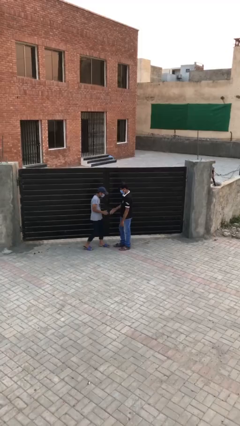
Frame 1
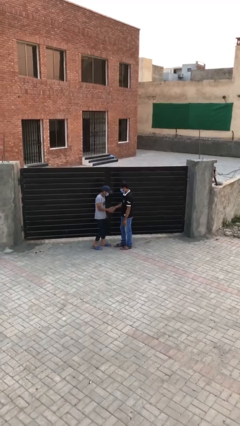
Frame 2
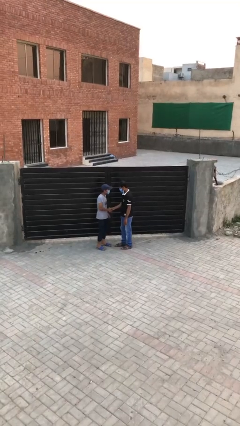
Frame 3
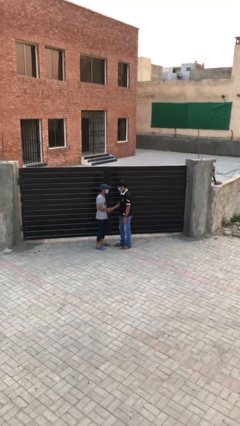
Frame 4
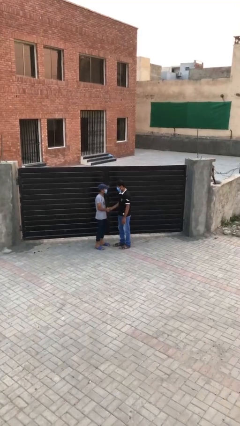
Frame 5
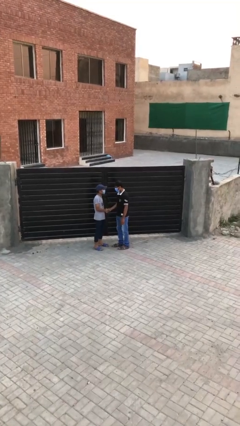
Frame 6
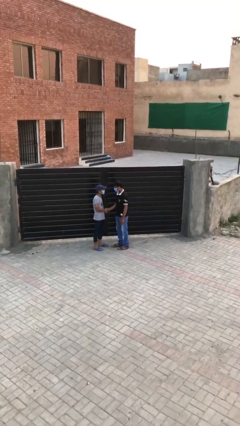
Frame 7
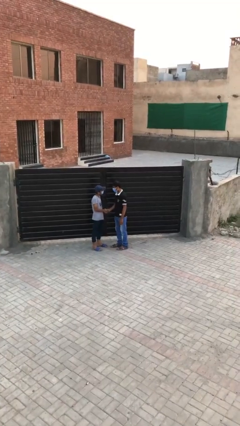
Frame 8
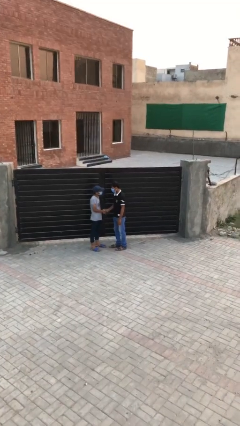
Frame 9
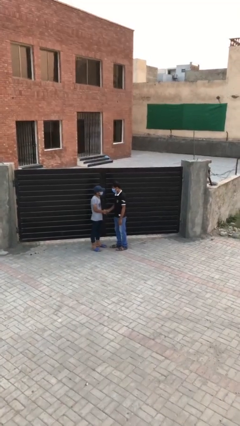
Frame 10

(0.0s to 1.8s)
person shakes hand

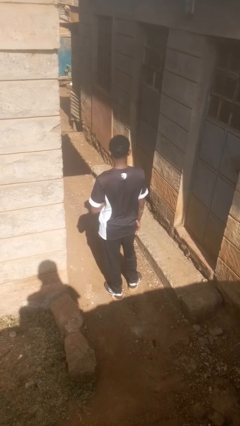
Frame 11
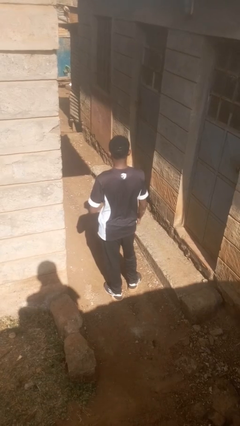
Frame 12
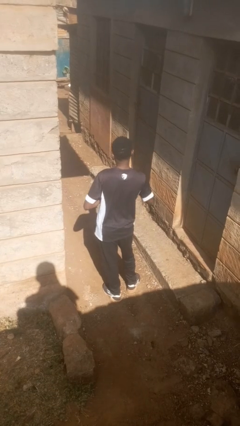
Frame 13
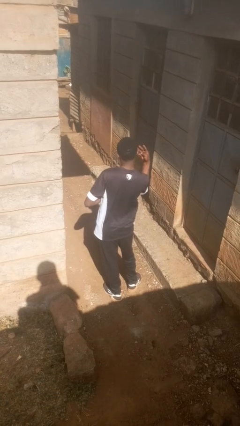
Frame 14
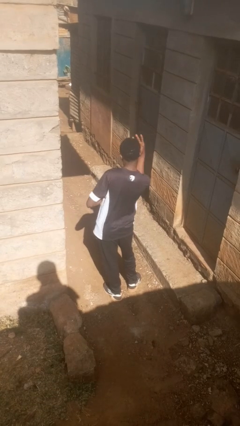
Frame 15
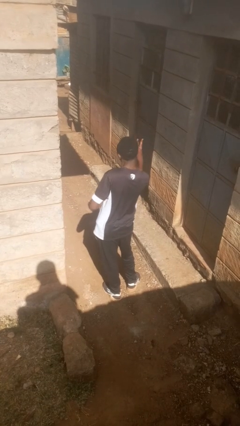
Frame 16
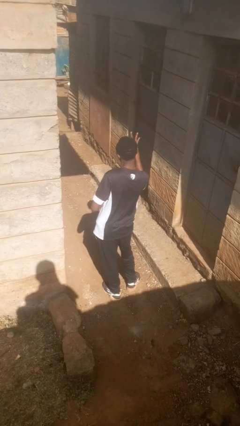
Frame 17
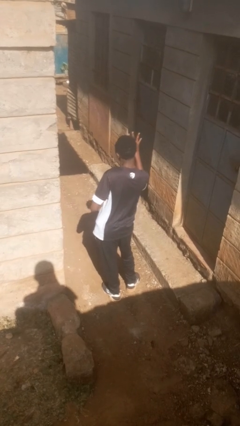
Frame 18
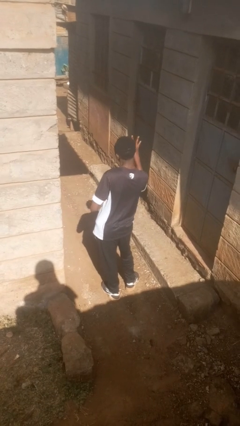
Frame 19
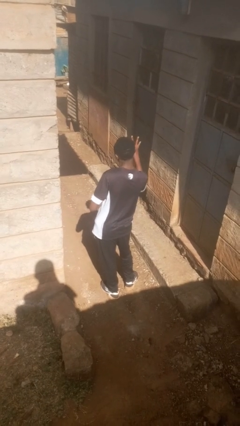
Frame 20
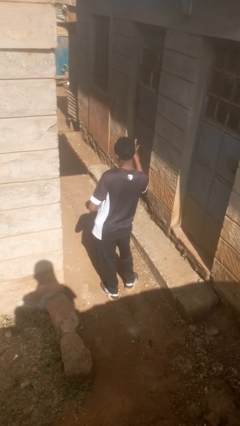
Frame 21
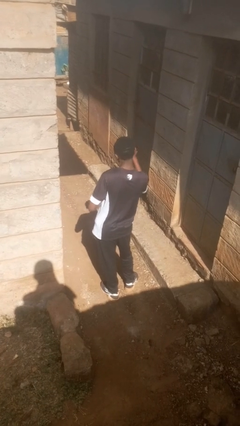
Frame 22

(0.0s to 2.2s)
person gestures number four

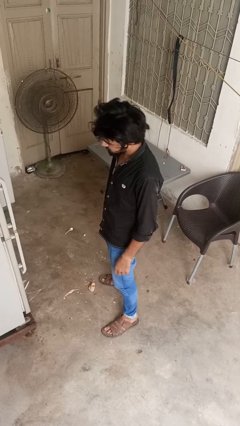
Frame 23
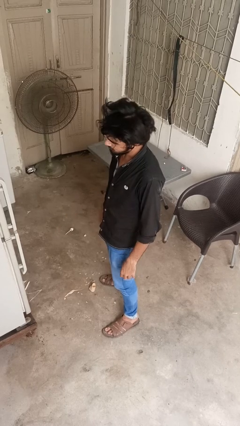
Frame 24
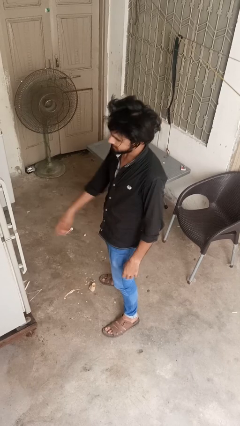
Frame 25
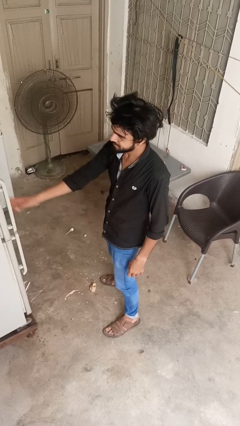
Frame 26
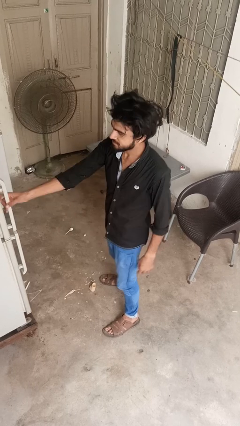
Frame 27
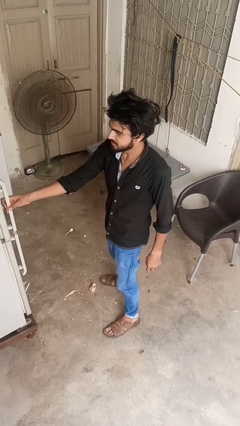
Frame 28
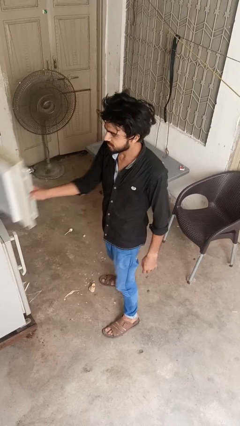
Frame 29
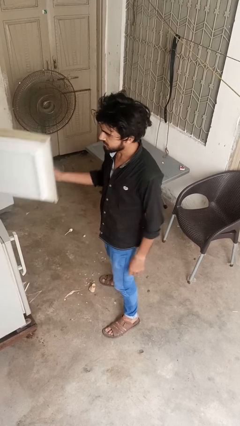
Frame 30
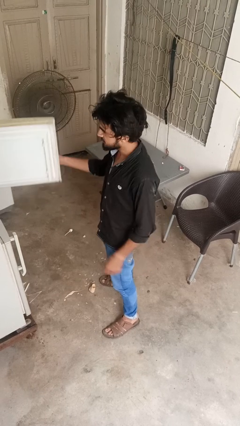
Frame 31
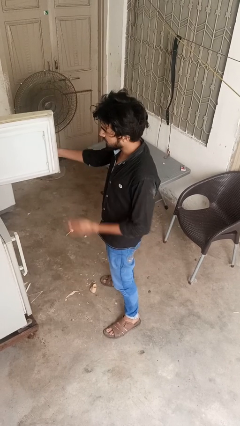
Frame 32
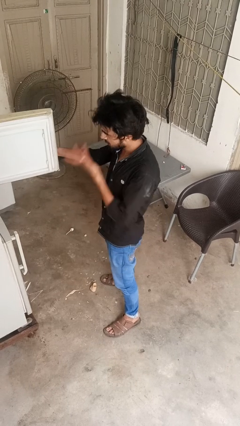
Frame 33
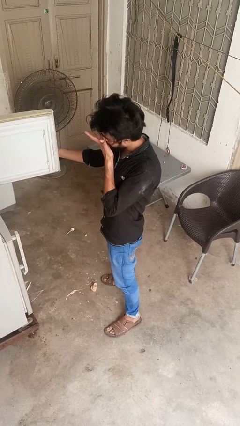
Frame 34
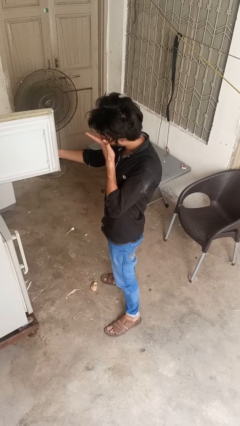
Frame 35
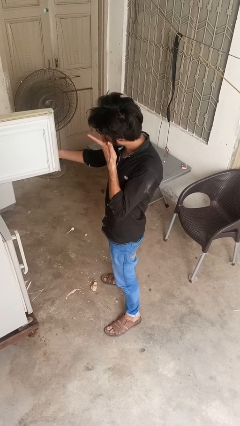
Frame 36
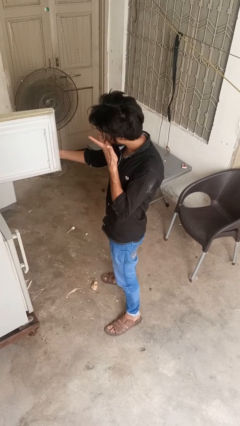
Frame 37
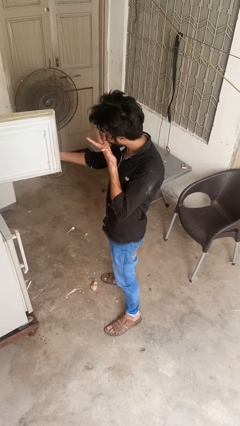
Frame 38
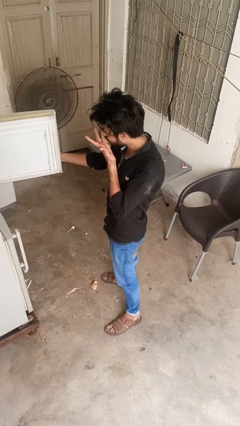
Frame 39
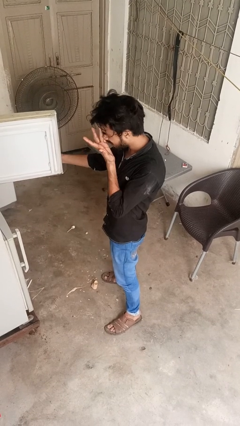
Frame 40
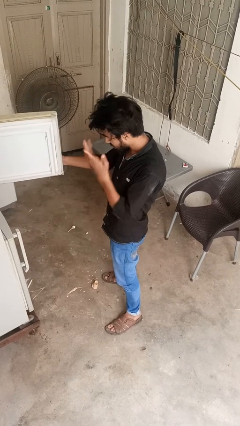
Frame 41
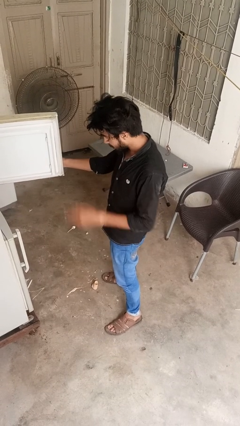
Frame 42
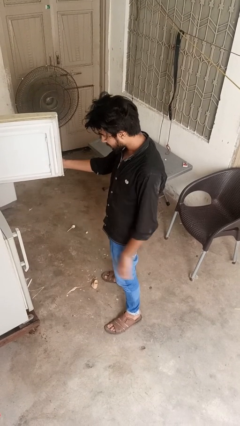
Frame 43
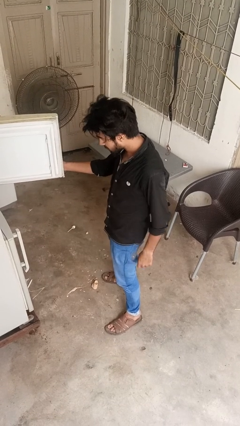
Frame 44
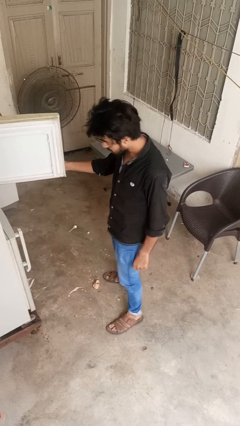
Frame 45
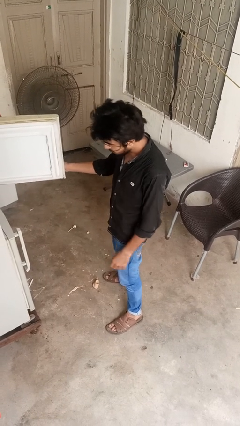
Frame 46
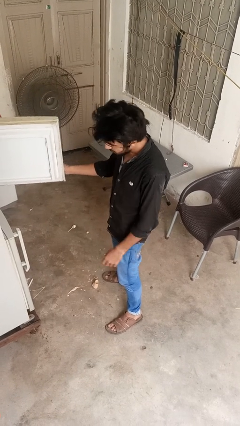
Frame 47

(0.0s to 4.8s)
person opens refrigerator

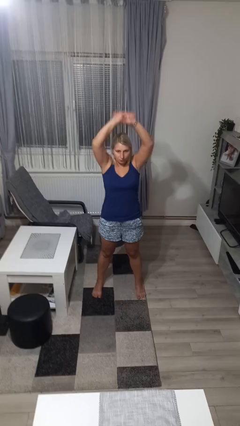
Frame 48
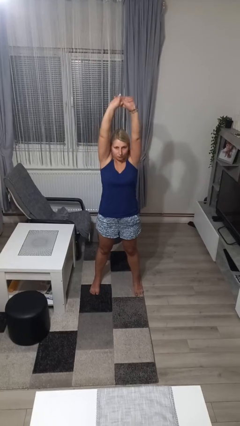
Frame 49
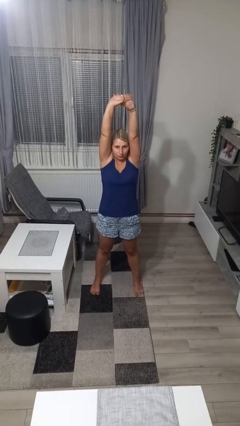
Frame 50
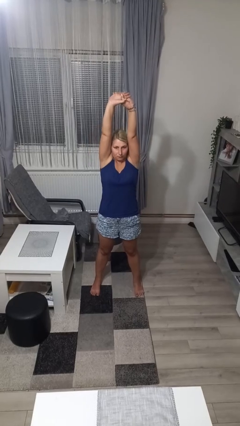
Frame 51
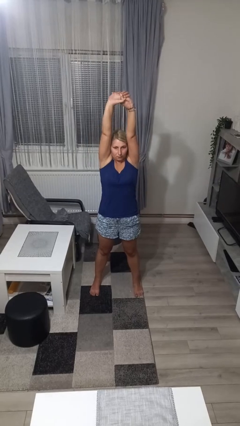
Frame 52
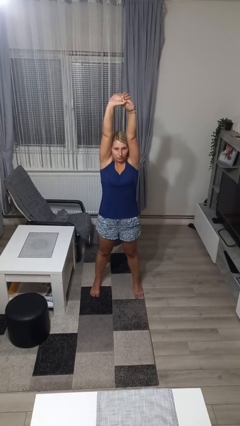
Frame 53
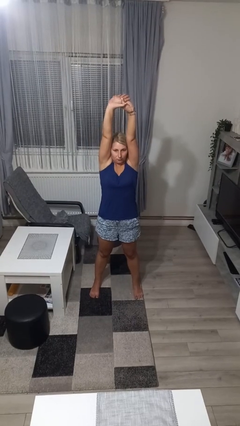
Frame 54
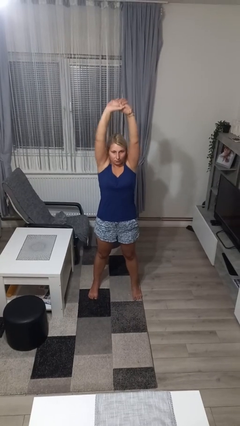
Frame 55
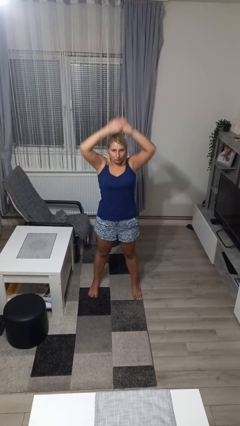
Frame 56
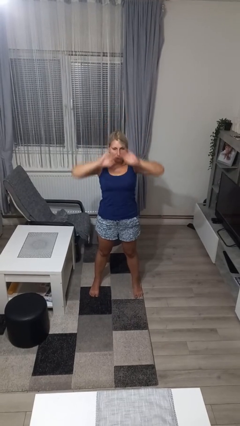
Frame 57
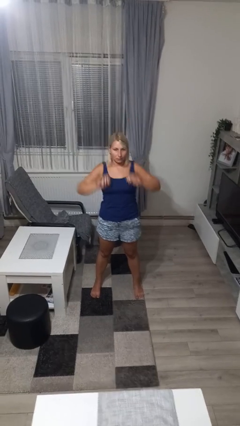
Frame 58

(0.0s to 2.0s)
person stretches arms over head

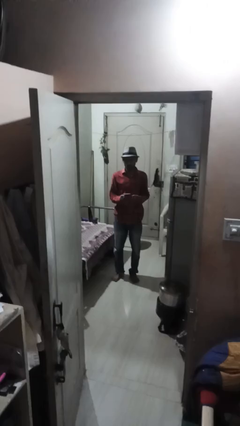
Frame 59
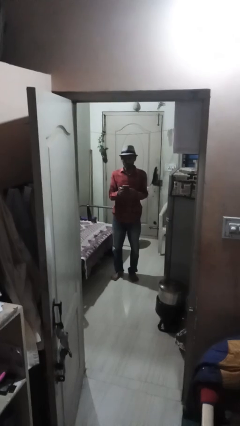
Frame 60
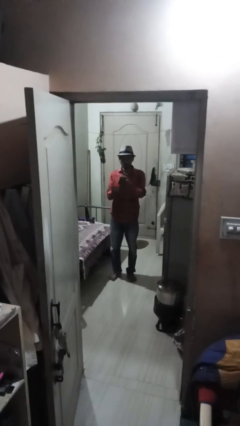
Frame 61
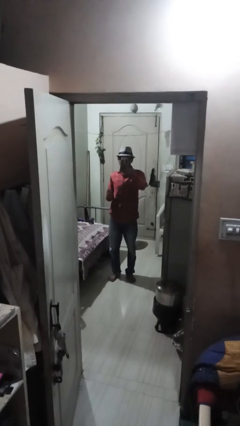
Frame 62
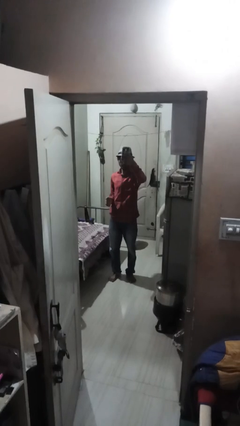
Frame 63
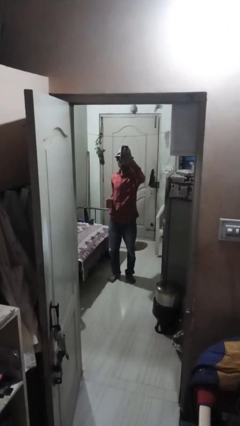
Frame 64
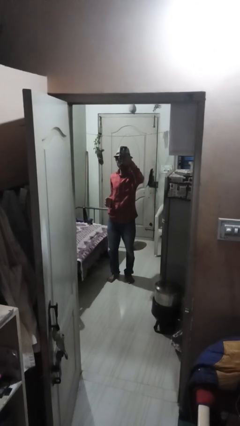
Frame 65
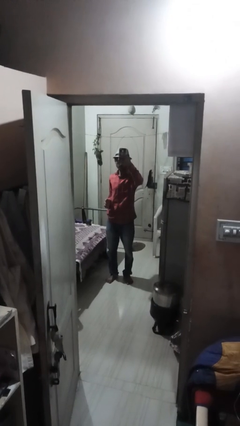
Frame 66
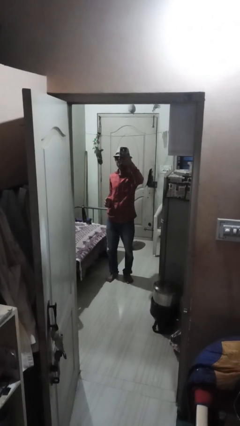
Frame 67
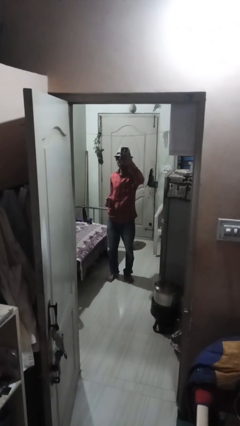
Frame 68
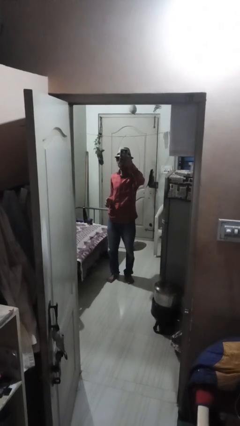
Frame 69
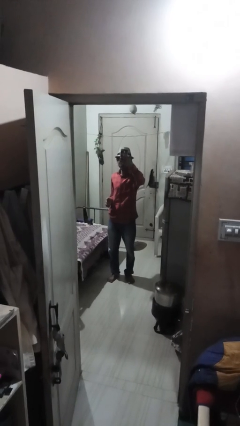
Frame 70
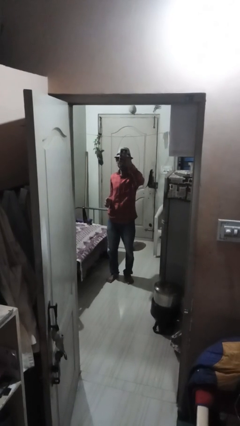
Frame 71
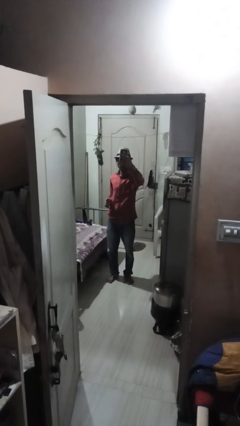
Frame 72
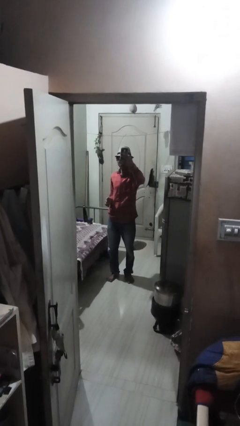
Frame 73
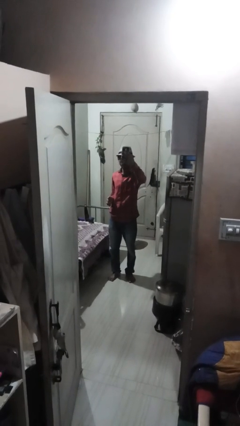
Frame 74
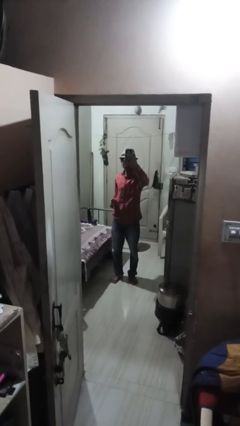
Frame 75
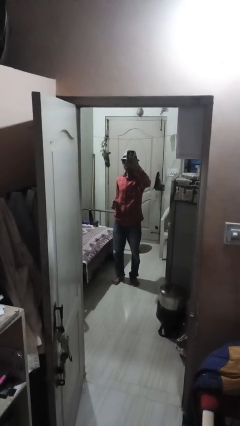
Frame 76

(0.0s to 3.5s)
person takes selfie

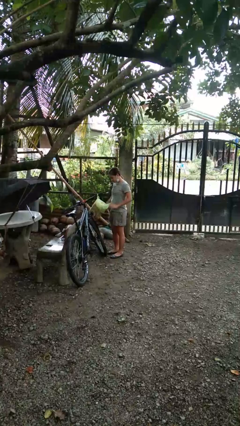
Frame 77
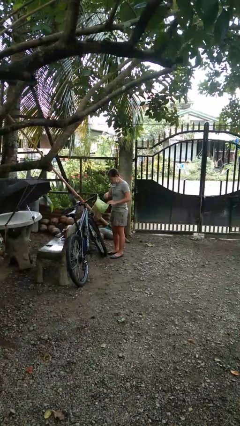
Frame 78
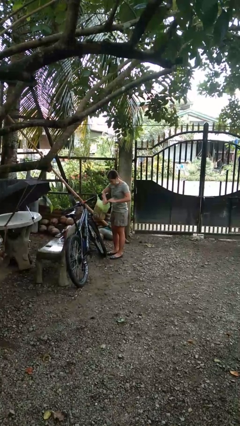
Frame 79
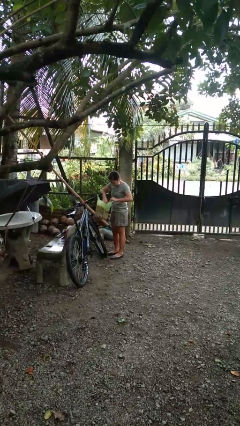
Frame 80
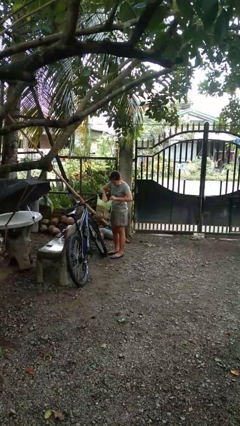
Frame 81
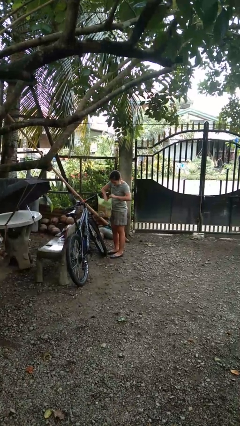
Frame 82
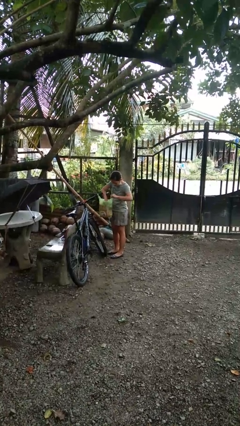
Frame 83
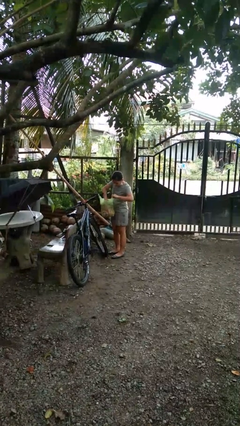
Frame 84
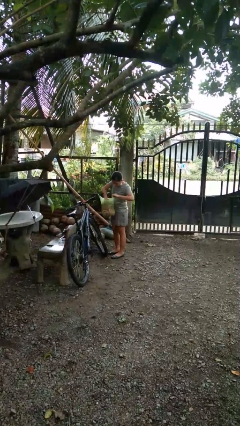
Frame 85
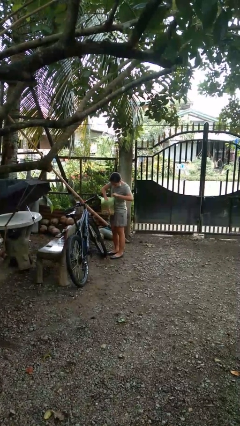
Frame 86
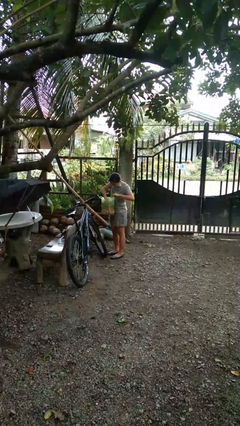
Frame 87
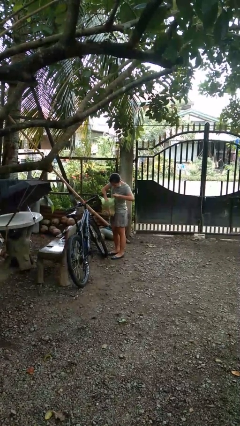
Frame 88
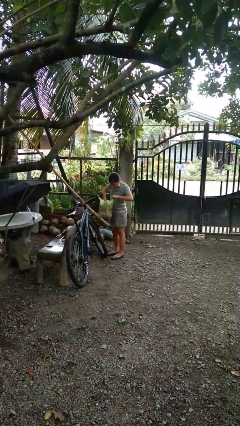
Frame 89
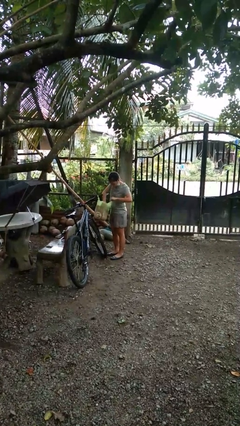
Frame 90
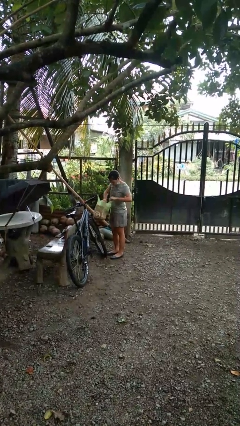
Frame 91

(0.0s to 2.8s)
person searches in bag

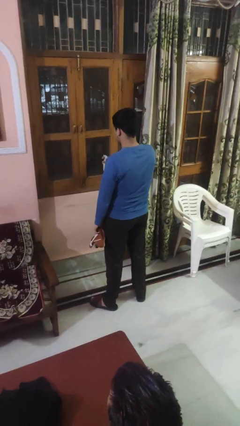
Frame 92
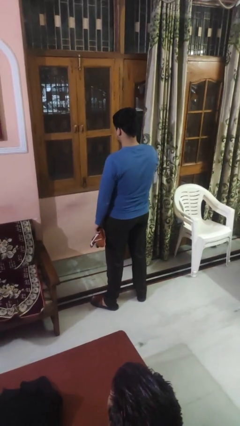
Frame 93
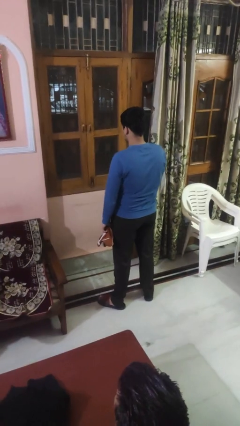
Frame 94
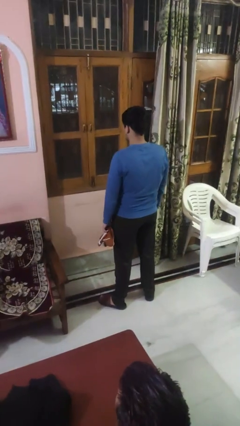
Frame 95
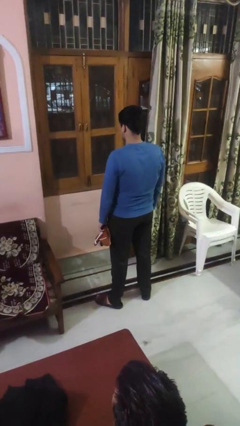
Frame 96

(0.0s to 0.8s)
person sprays from bottle
